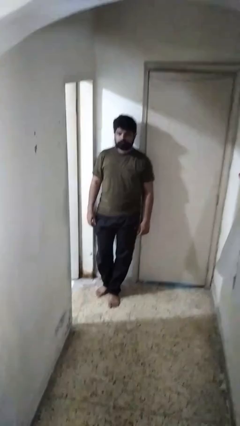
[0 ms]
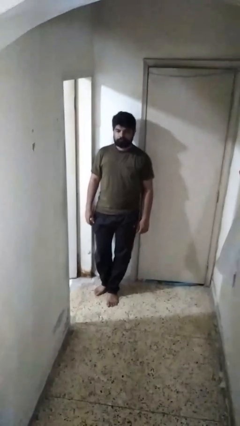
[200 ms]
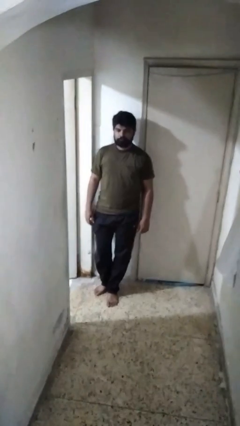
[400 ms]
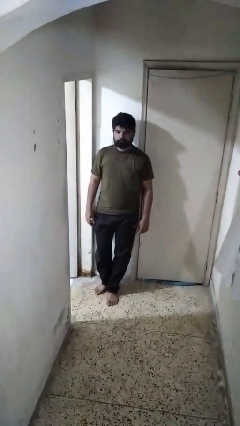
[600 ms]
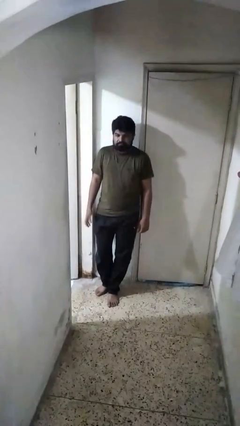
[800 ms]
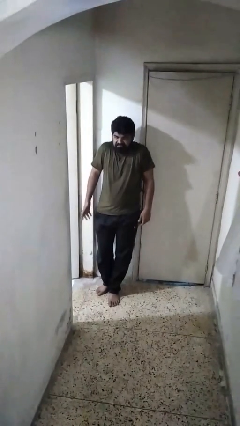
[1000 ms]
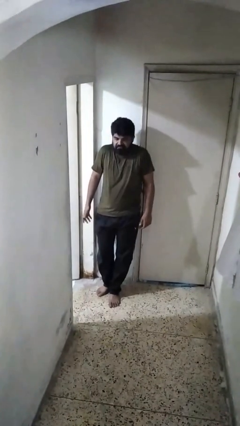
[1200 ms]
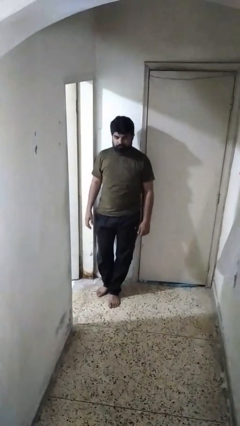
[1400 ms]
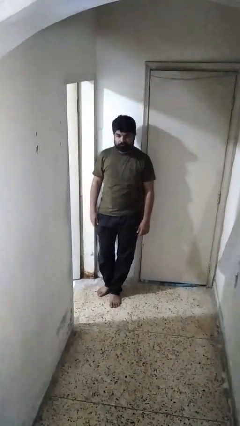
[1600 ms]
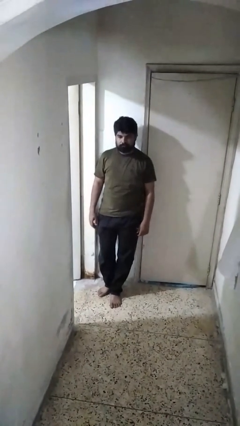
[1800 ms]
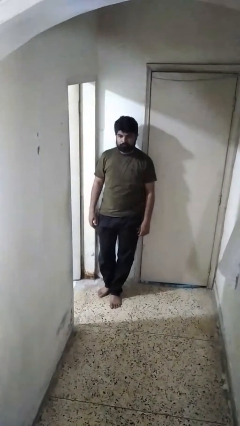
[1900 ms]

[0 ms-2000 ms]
person shrugs

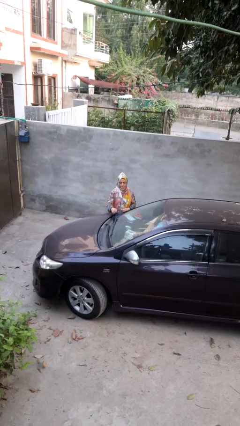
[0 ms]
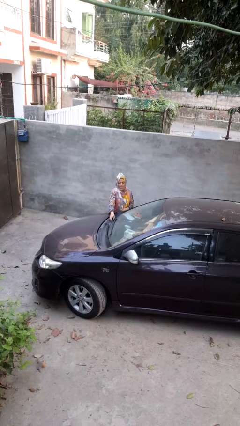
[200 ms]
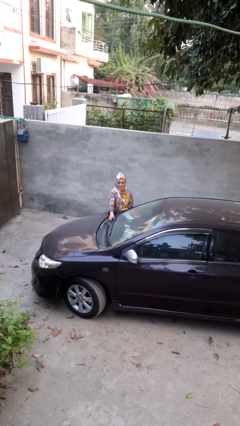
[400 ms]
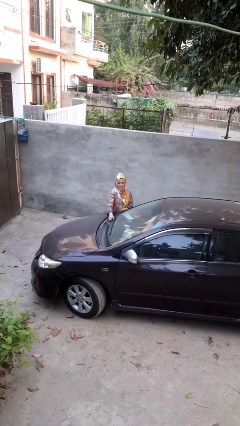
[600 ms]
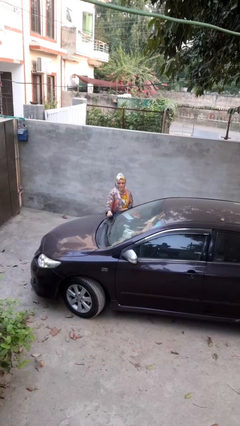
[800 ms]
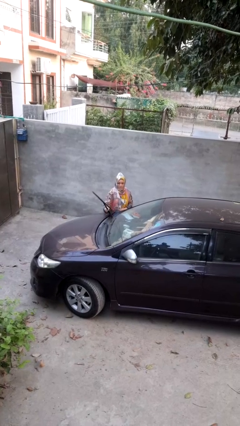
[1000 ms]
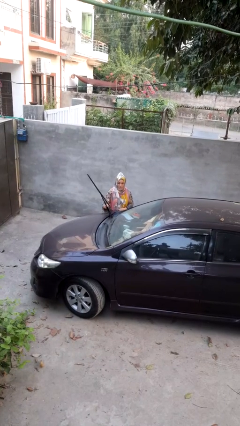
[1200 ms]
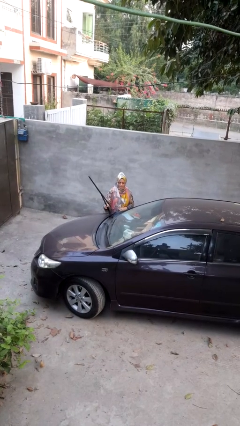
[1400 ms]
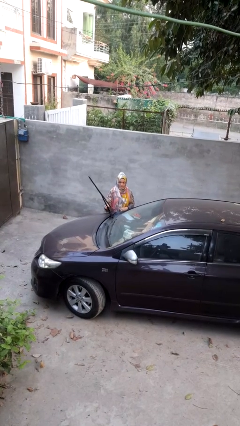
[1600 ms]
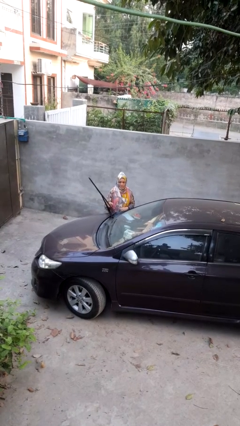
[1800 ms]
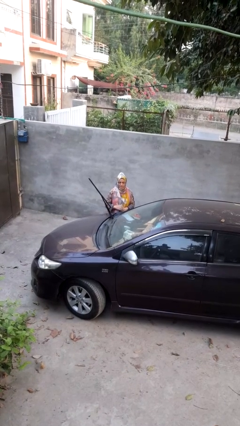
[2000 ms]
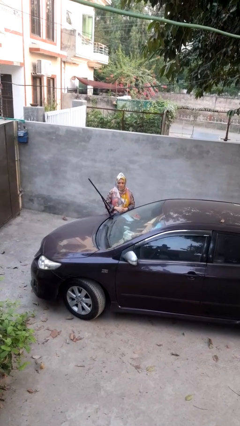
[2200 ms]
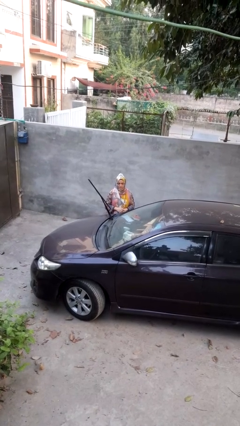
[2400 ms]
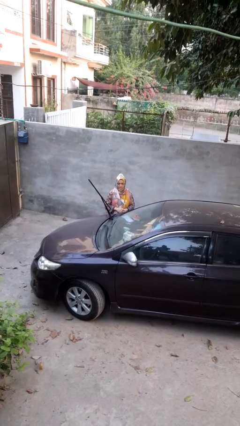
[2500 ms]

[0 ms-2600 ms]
person flips up car wipers

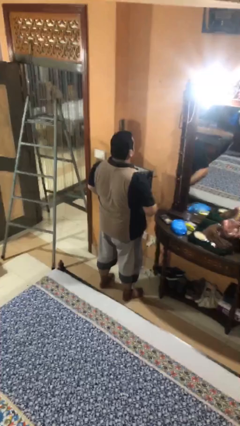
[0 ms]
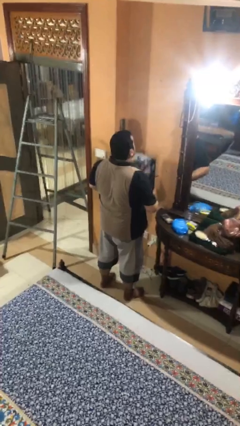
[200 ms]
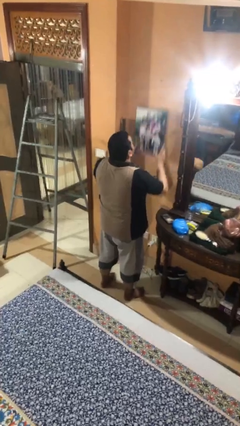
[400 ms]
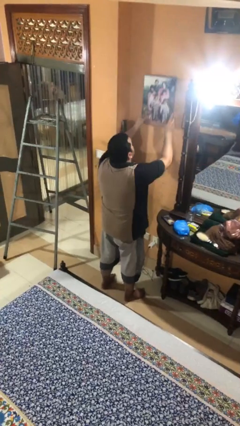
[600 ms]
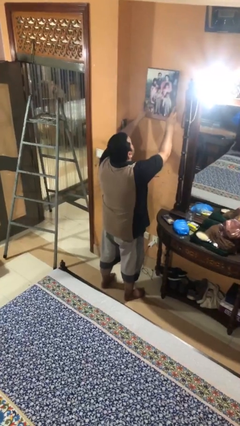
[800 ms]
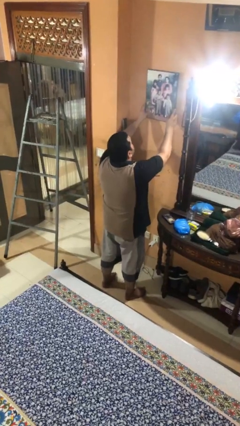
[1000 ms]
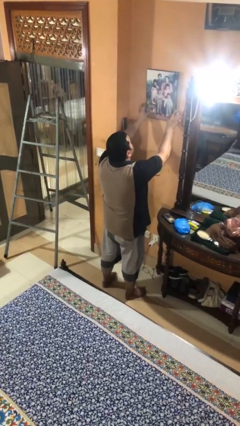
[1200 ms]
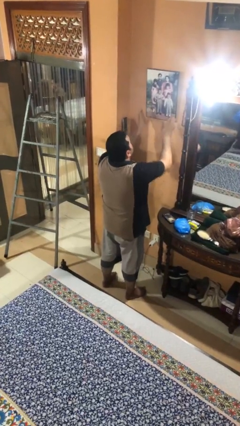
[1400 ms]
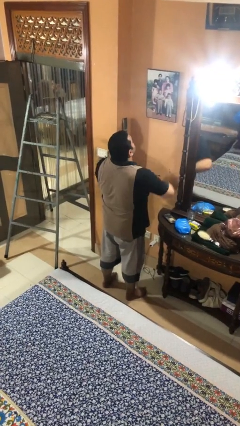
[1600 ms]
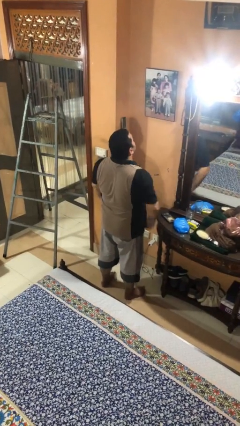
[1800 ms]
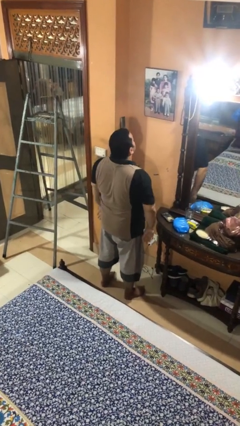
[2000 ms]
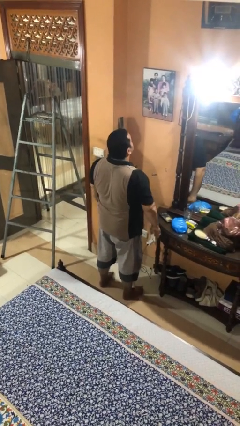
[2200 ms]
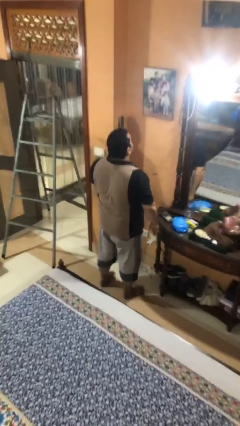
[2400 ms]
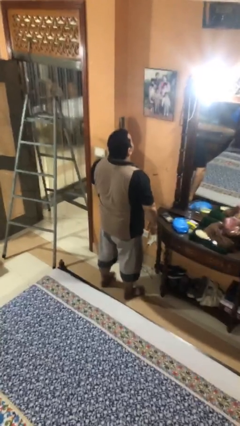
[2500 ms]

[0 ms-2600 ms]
person puts up picture frame

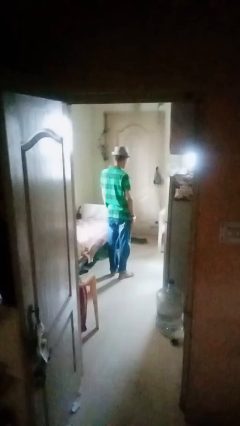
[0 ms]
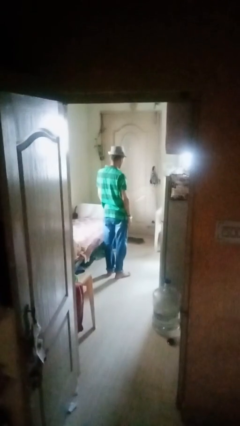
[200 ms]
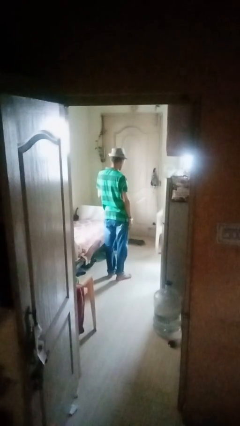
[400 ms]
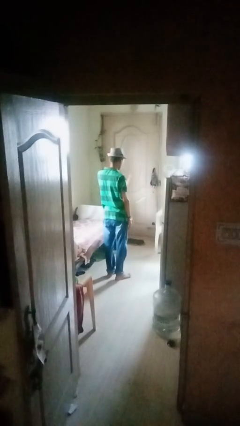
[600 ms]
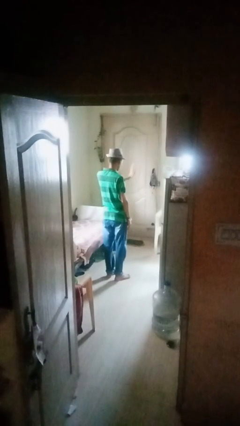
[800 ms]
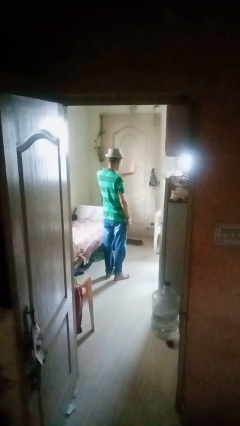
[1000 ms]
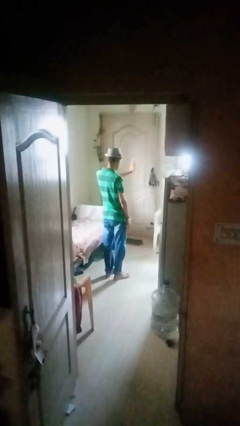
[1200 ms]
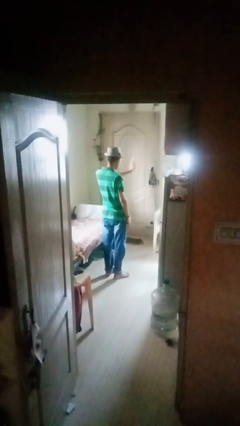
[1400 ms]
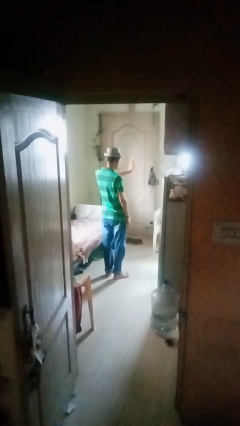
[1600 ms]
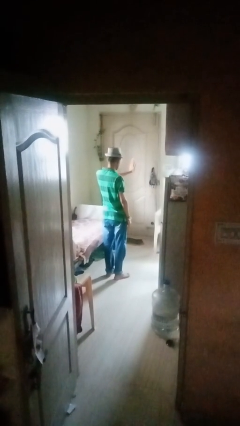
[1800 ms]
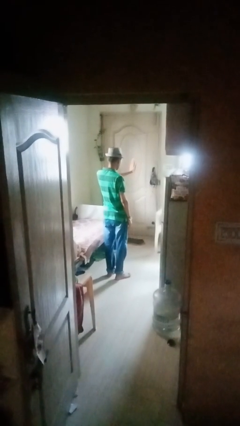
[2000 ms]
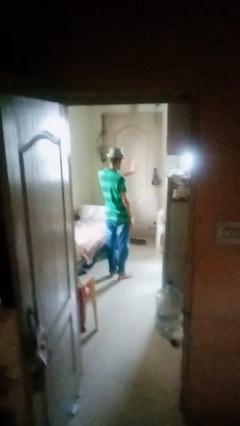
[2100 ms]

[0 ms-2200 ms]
person gestures stop

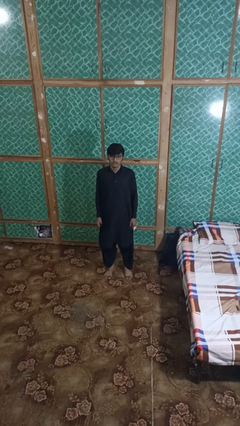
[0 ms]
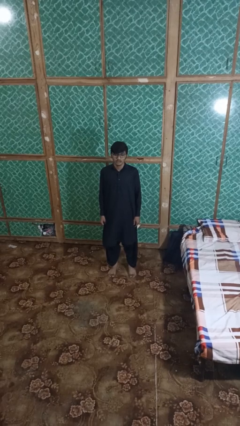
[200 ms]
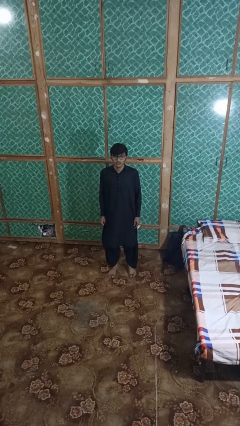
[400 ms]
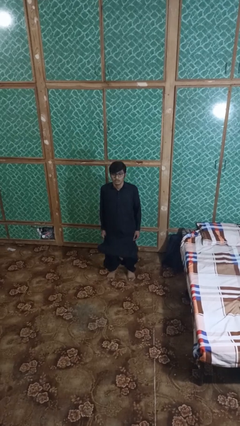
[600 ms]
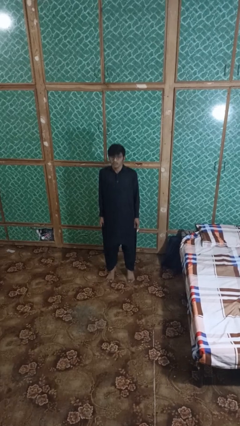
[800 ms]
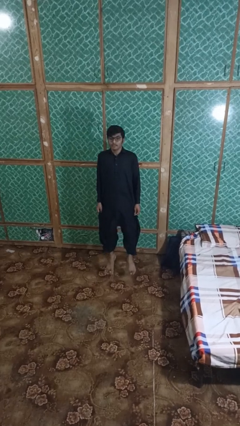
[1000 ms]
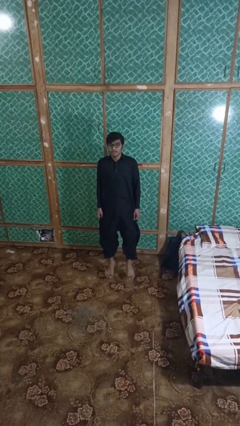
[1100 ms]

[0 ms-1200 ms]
person jumps

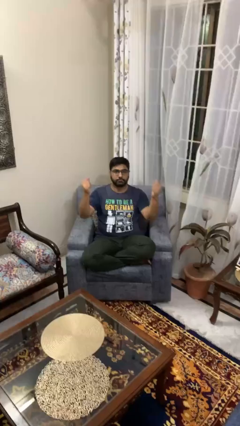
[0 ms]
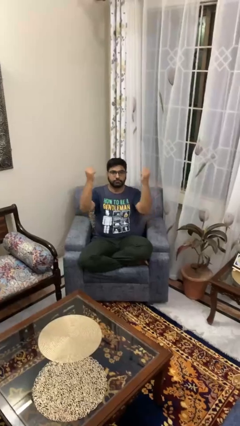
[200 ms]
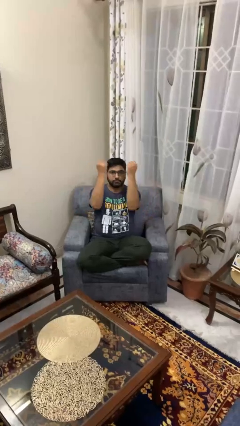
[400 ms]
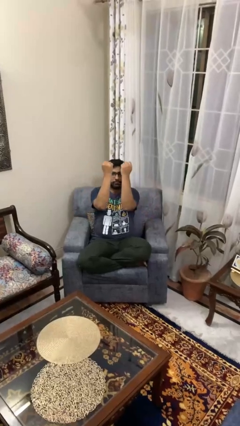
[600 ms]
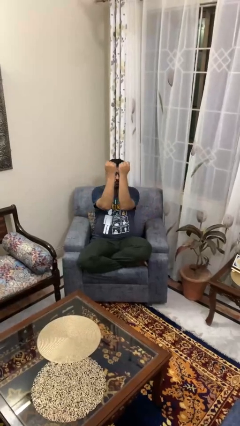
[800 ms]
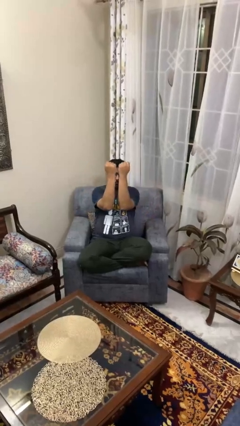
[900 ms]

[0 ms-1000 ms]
person gestures zoom in

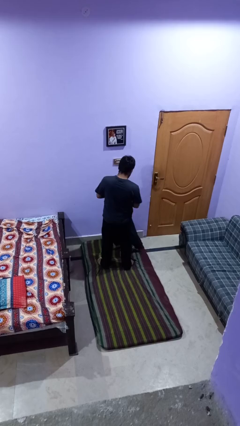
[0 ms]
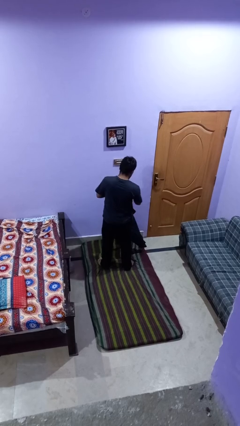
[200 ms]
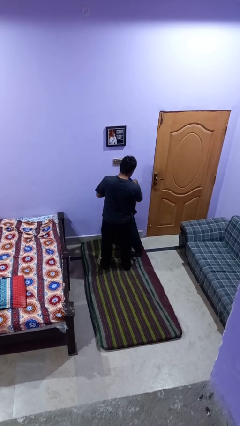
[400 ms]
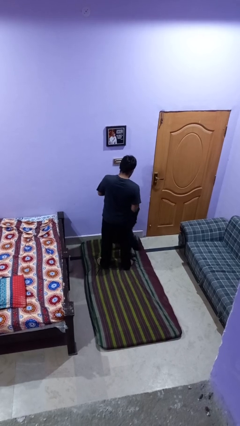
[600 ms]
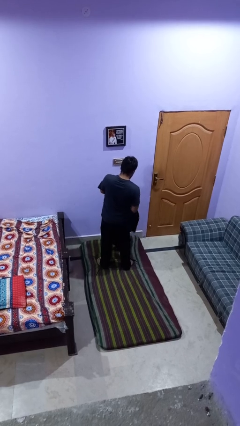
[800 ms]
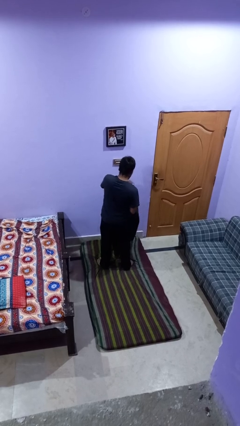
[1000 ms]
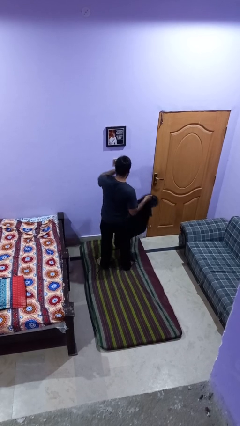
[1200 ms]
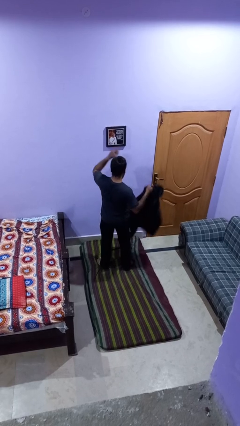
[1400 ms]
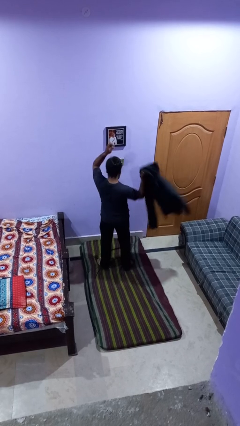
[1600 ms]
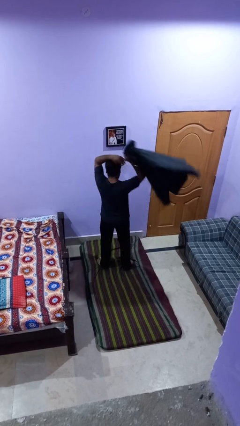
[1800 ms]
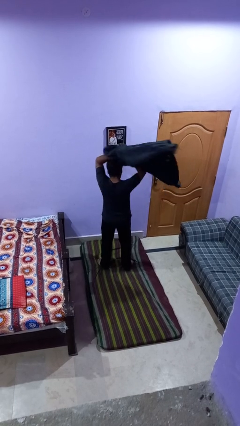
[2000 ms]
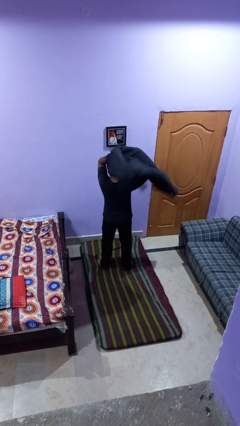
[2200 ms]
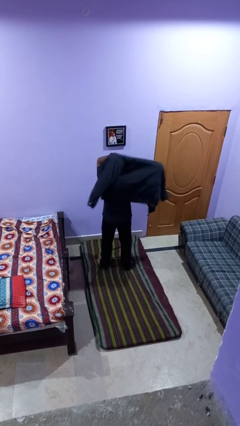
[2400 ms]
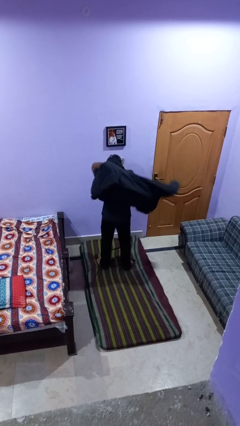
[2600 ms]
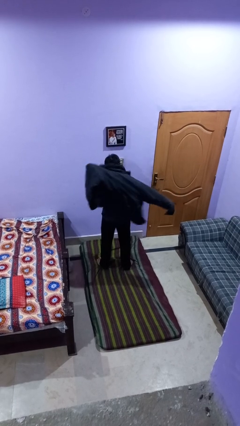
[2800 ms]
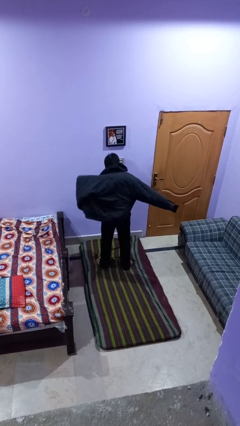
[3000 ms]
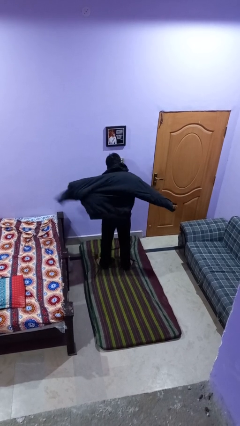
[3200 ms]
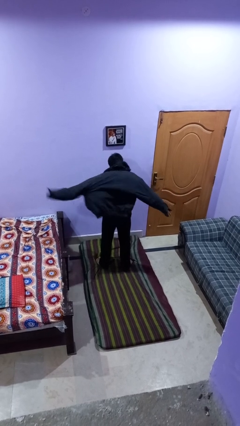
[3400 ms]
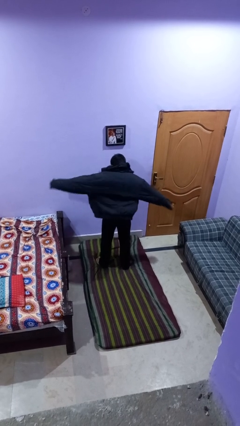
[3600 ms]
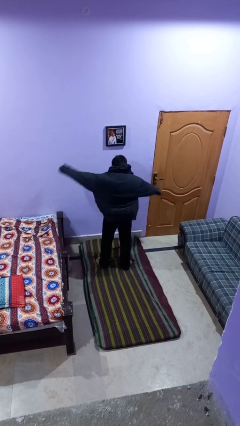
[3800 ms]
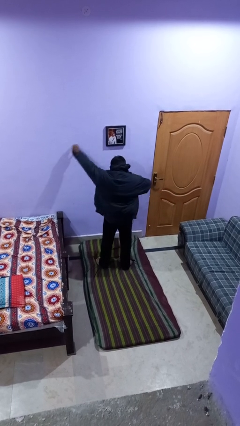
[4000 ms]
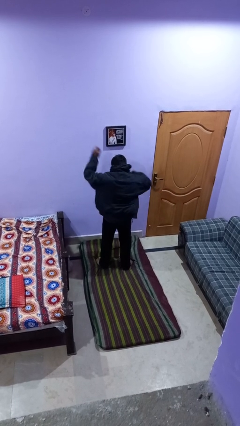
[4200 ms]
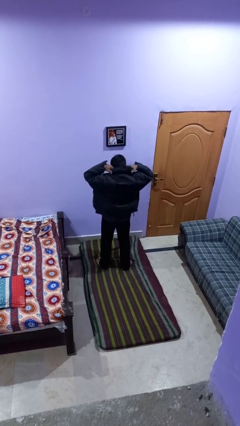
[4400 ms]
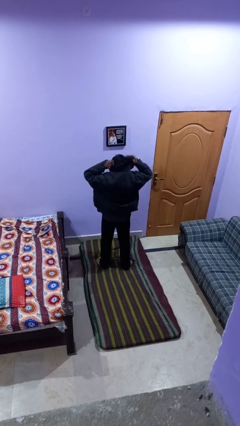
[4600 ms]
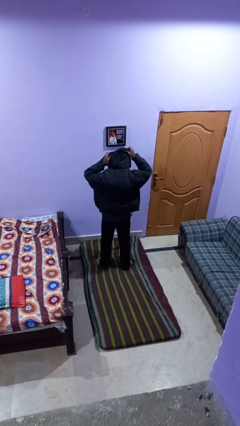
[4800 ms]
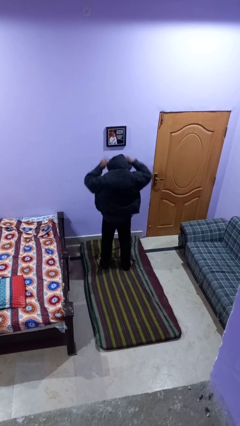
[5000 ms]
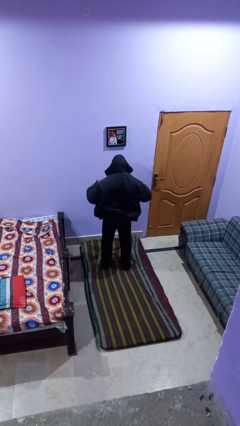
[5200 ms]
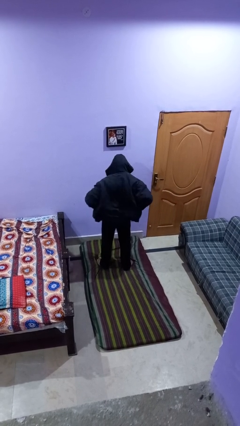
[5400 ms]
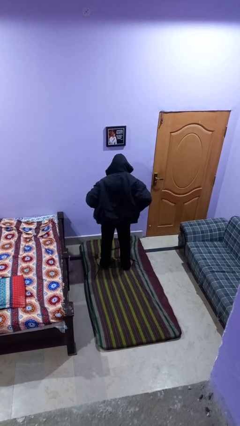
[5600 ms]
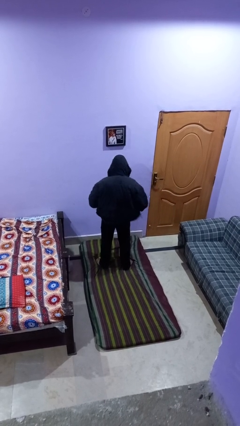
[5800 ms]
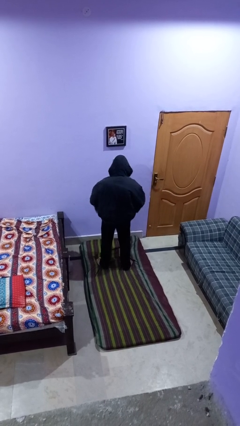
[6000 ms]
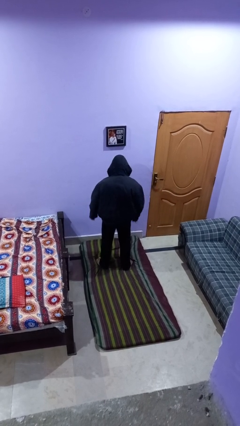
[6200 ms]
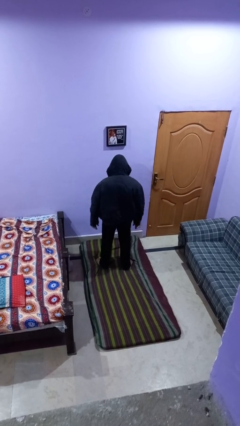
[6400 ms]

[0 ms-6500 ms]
person puts on hoodie
